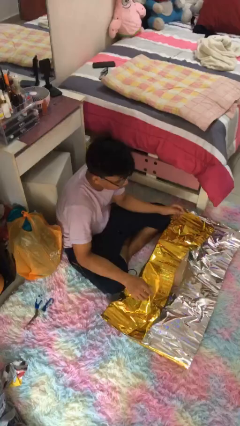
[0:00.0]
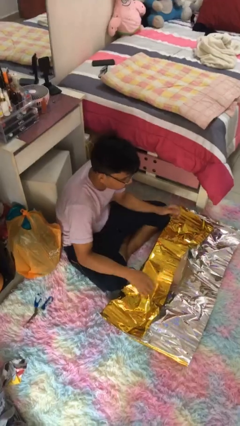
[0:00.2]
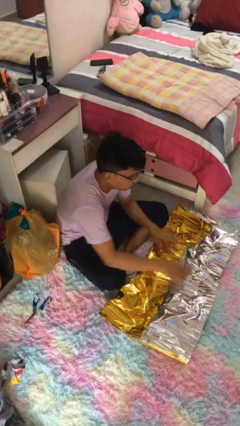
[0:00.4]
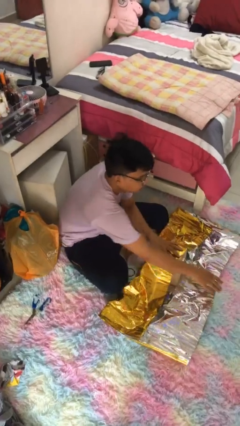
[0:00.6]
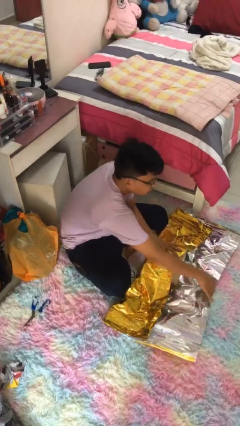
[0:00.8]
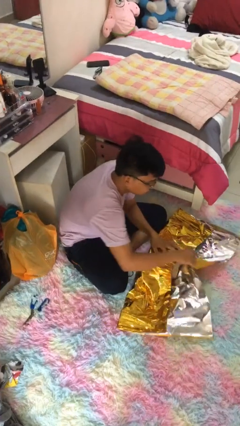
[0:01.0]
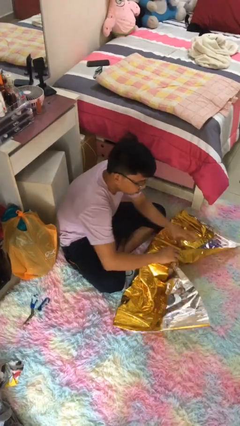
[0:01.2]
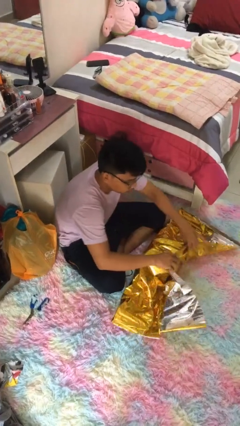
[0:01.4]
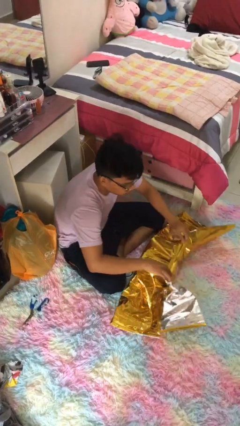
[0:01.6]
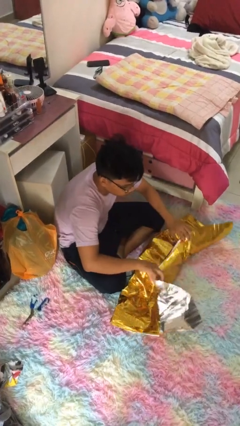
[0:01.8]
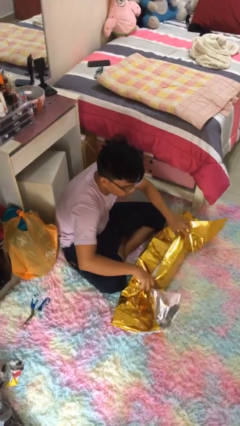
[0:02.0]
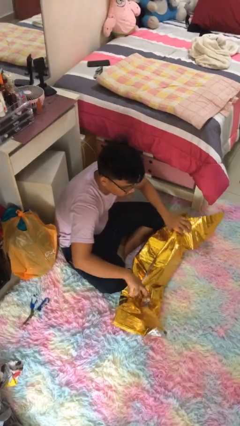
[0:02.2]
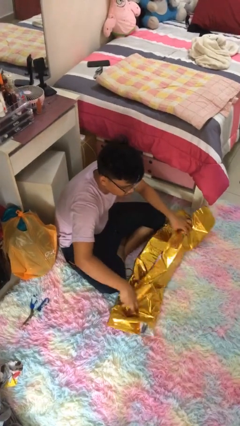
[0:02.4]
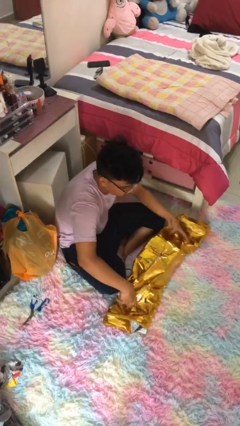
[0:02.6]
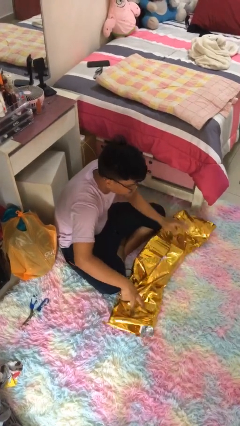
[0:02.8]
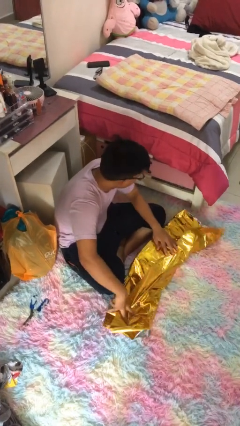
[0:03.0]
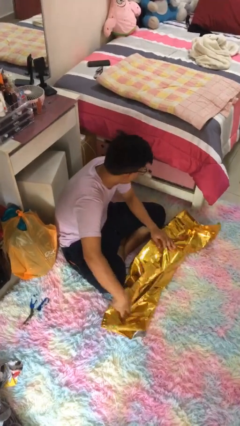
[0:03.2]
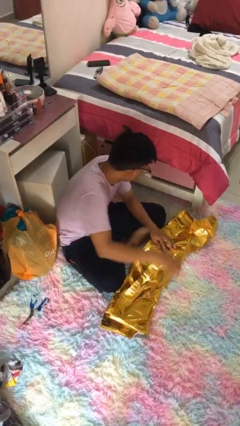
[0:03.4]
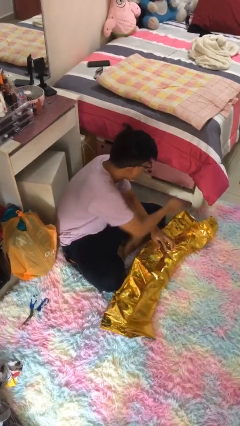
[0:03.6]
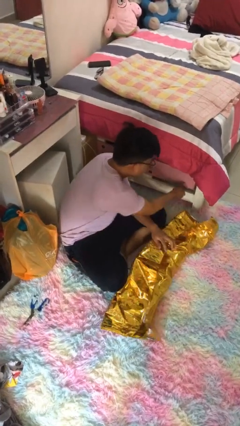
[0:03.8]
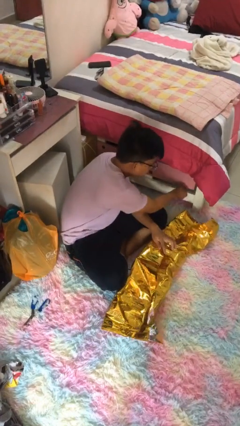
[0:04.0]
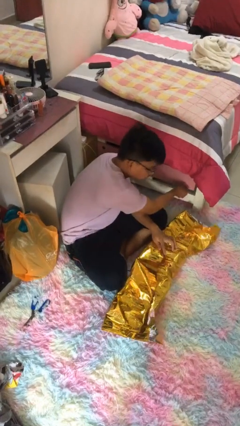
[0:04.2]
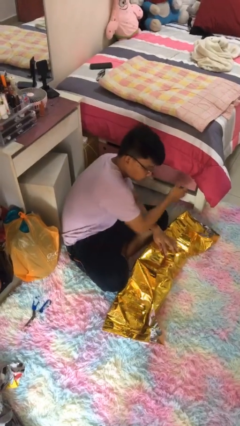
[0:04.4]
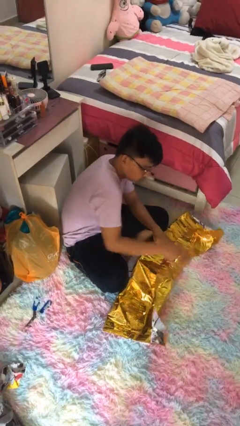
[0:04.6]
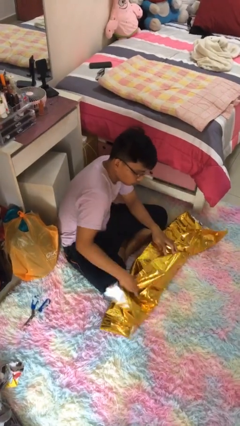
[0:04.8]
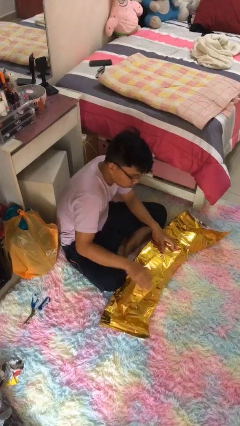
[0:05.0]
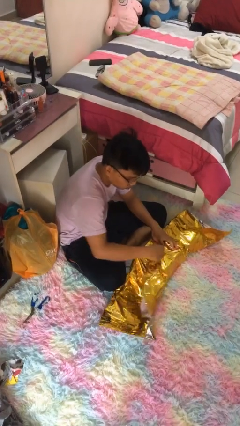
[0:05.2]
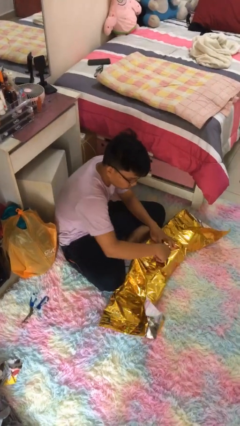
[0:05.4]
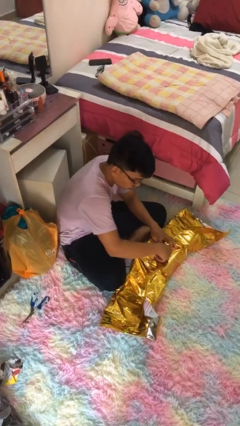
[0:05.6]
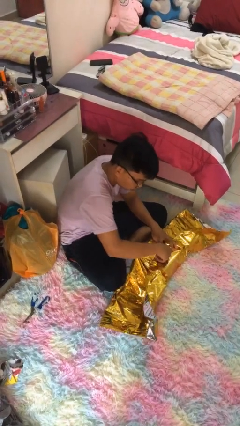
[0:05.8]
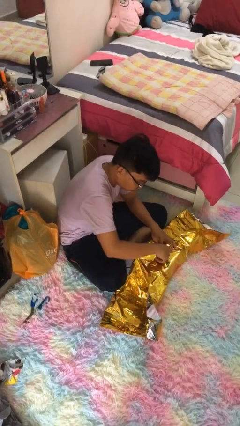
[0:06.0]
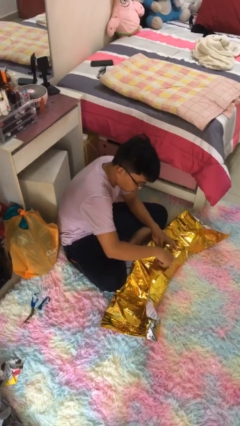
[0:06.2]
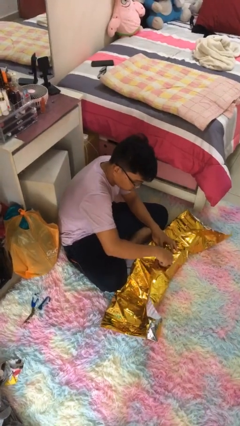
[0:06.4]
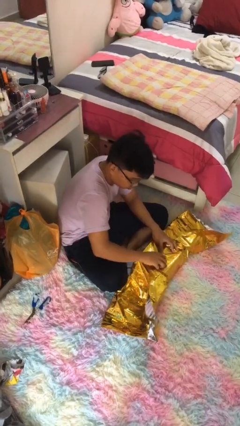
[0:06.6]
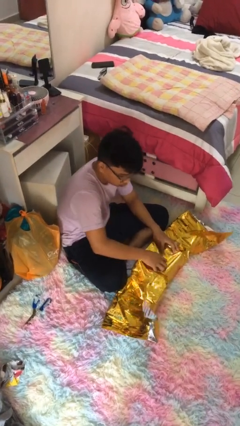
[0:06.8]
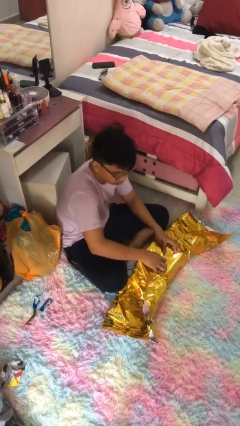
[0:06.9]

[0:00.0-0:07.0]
person wraps box

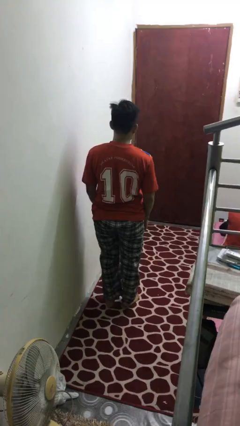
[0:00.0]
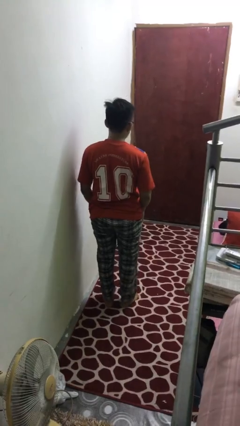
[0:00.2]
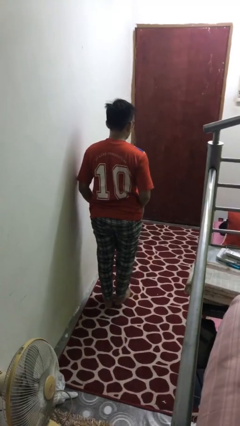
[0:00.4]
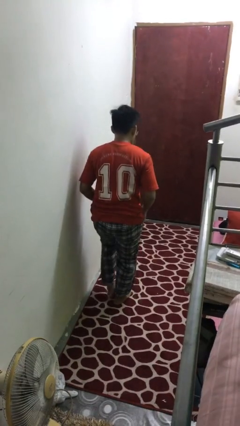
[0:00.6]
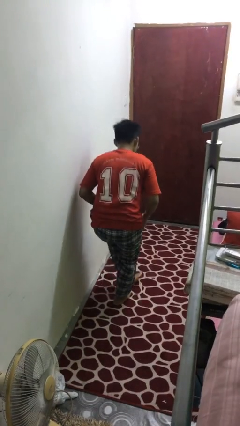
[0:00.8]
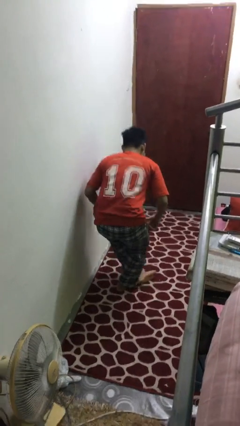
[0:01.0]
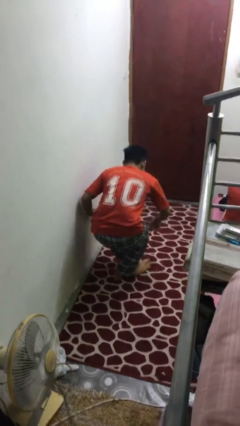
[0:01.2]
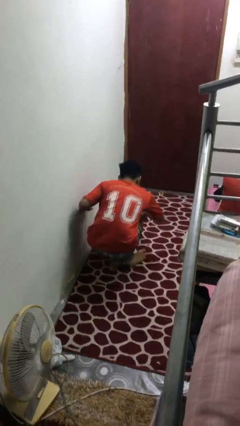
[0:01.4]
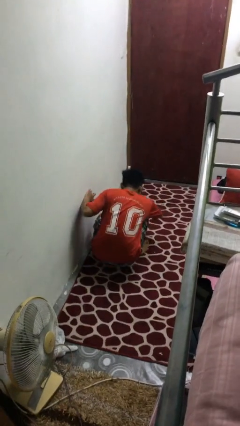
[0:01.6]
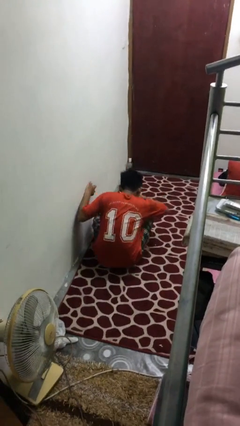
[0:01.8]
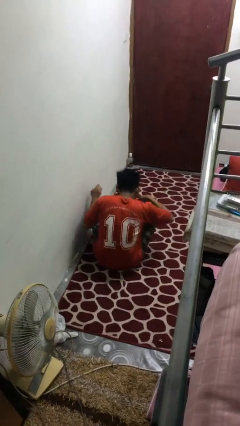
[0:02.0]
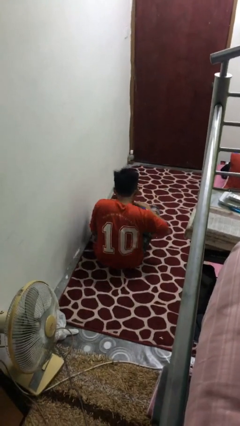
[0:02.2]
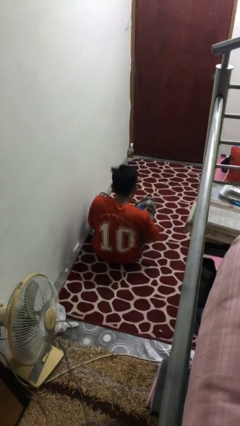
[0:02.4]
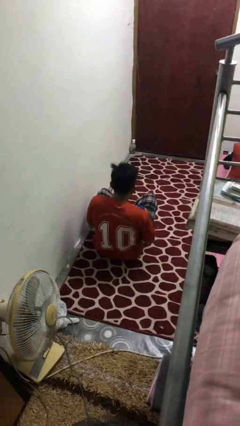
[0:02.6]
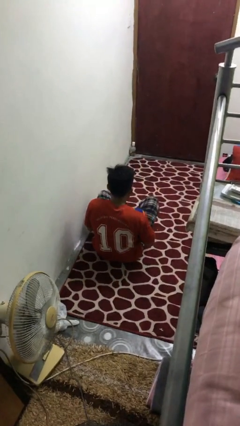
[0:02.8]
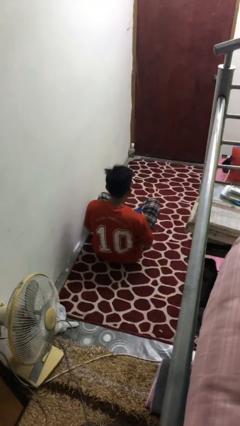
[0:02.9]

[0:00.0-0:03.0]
person sits crisscross

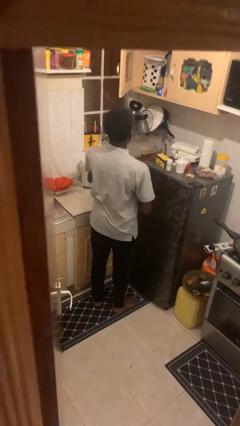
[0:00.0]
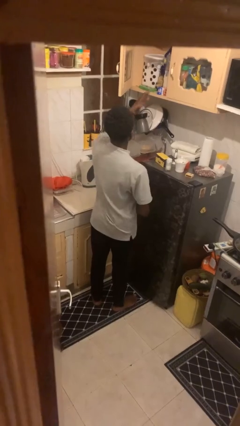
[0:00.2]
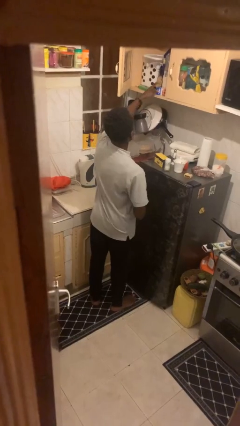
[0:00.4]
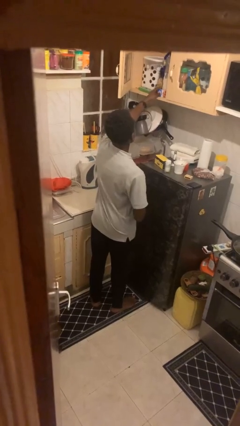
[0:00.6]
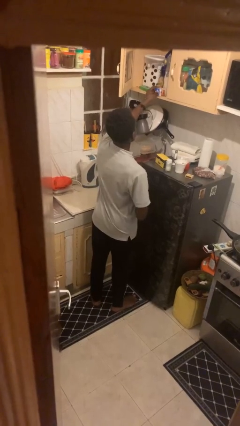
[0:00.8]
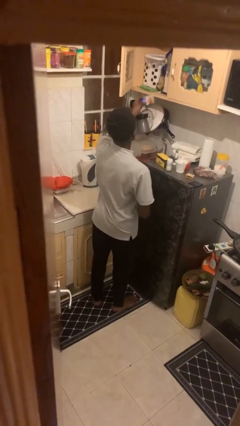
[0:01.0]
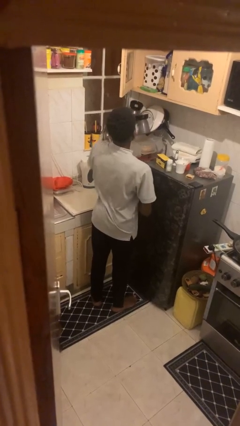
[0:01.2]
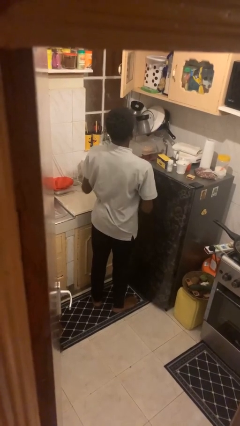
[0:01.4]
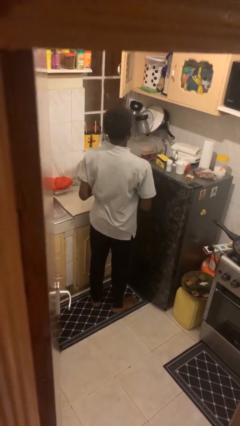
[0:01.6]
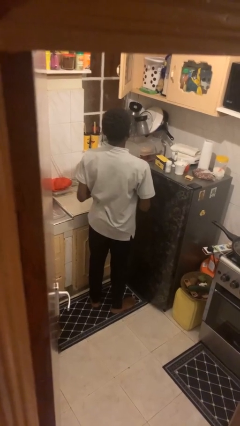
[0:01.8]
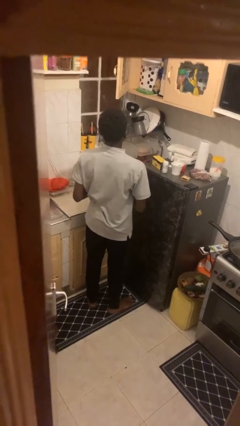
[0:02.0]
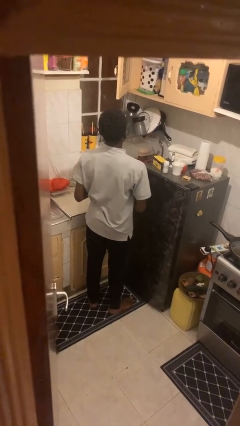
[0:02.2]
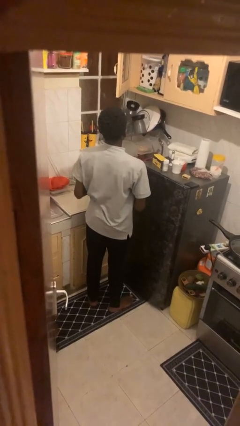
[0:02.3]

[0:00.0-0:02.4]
person picks up object from cabinet

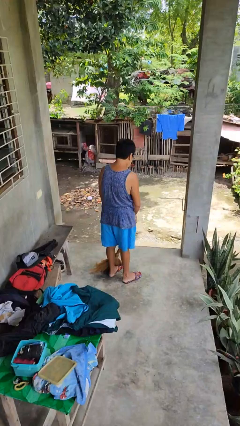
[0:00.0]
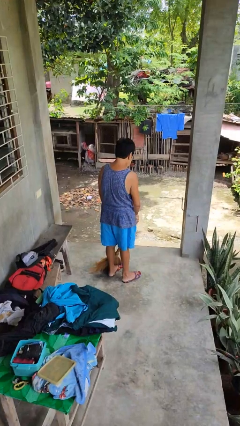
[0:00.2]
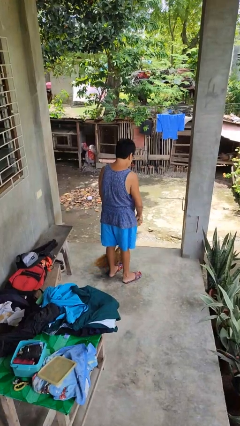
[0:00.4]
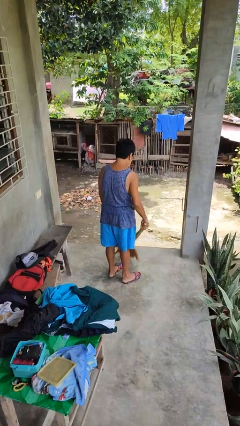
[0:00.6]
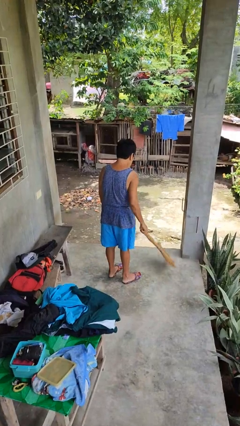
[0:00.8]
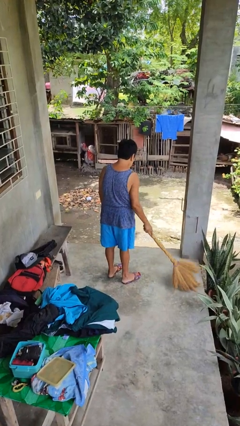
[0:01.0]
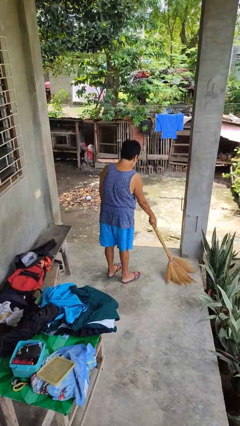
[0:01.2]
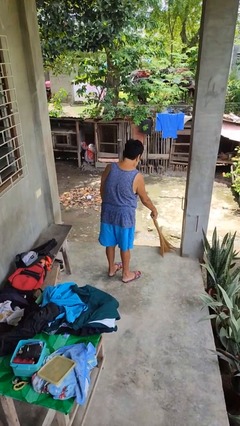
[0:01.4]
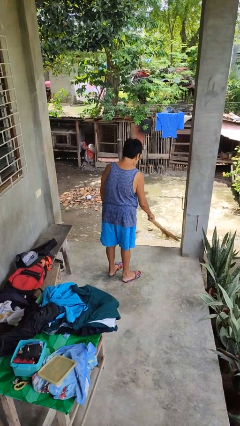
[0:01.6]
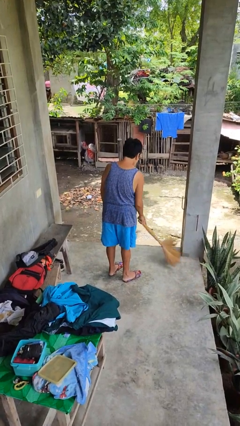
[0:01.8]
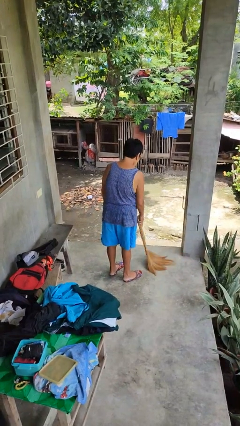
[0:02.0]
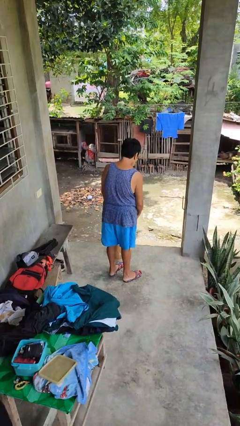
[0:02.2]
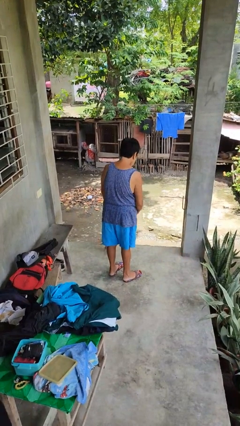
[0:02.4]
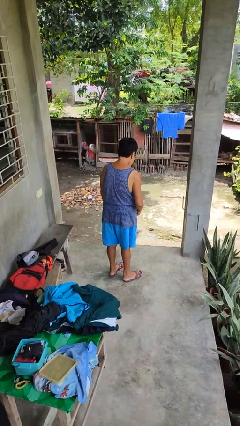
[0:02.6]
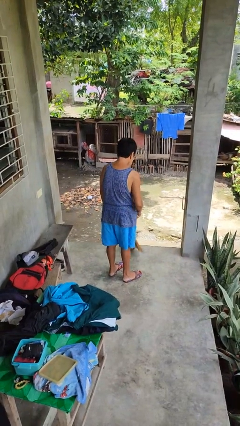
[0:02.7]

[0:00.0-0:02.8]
person sweeps floor

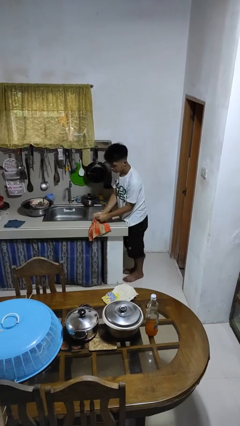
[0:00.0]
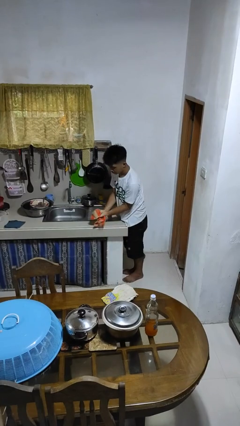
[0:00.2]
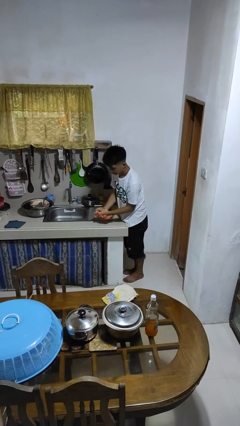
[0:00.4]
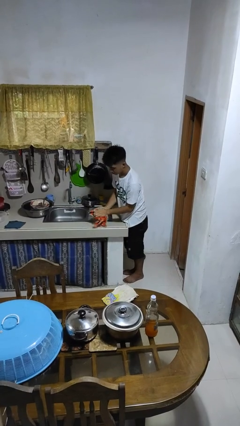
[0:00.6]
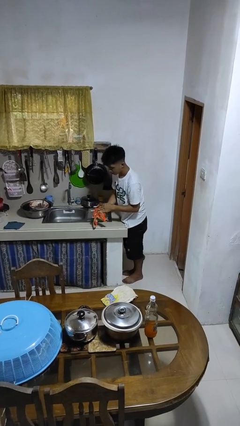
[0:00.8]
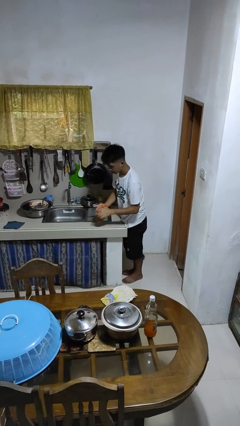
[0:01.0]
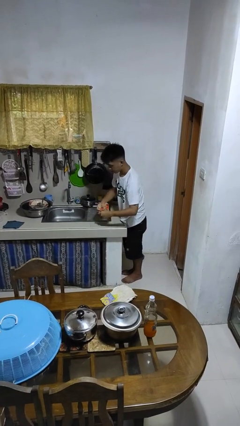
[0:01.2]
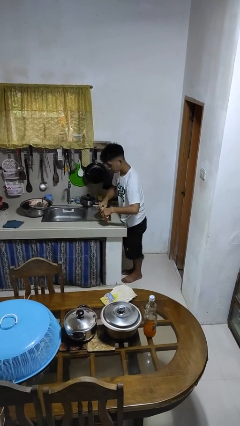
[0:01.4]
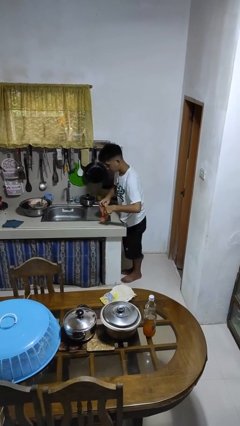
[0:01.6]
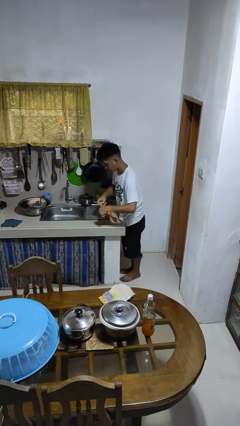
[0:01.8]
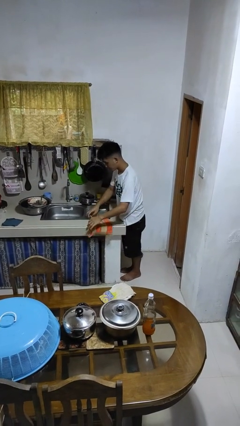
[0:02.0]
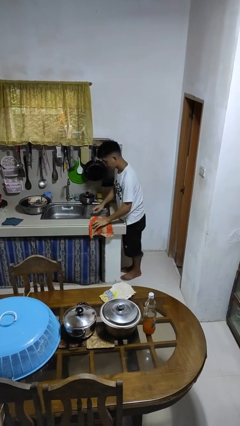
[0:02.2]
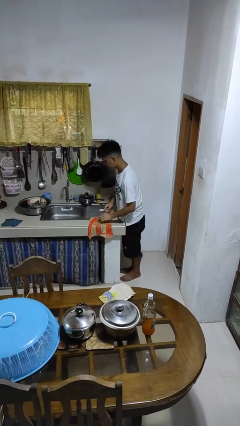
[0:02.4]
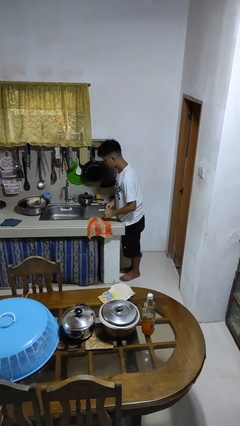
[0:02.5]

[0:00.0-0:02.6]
person dries hands with towel
